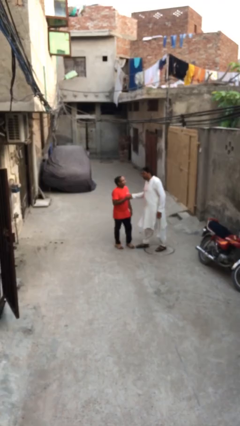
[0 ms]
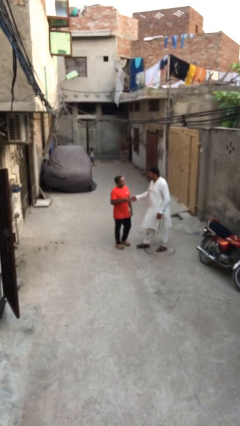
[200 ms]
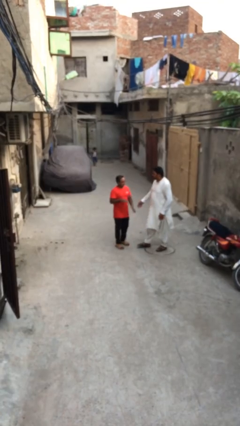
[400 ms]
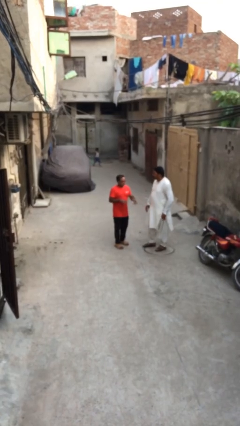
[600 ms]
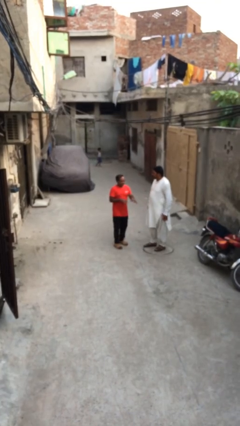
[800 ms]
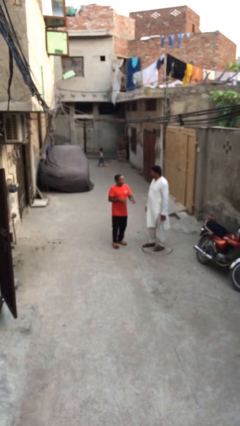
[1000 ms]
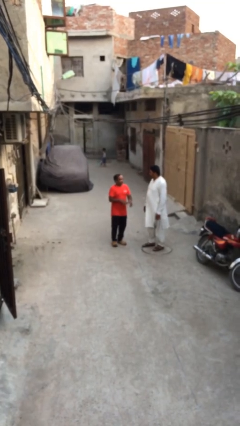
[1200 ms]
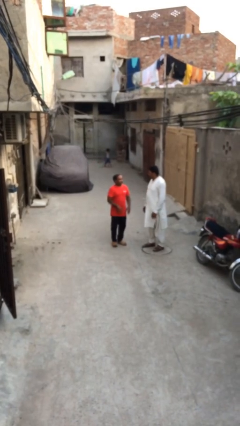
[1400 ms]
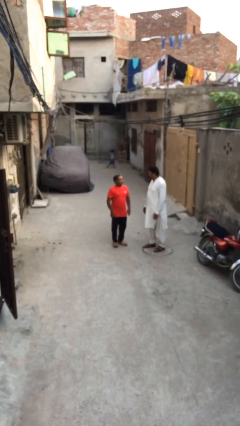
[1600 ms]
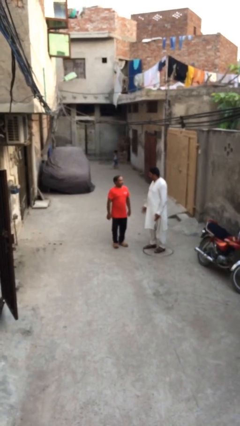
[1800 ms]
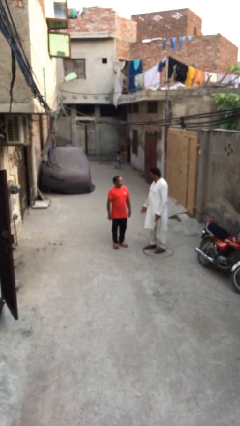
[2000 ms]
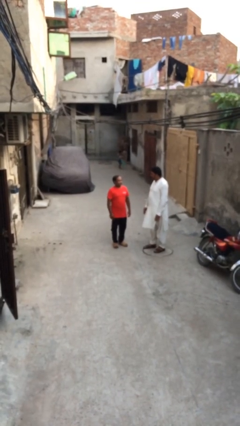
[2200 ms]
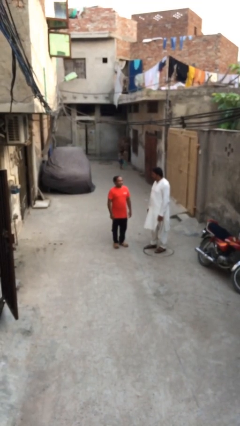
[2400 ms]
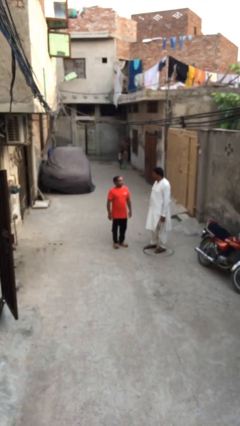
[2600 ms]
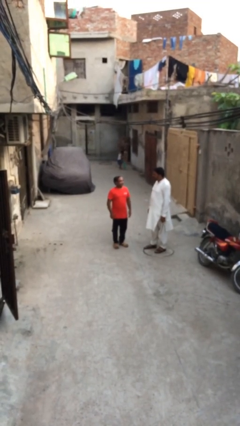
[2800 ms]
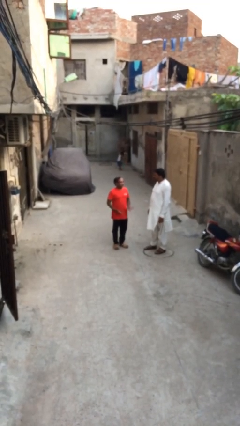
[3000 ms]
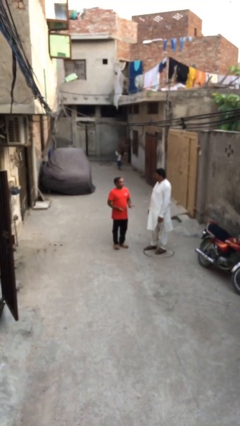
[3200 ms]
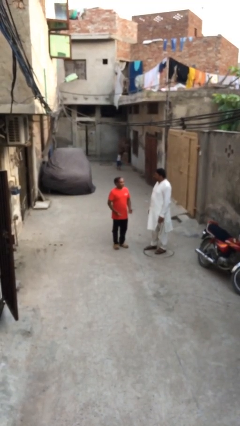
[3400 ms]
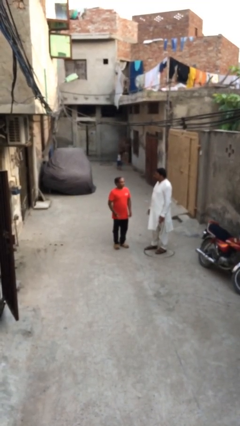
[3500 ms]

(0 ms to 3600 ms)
person talks to person

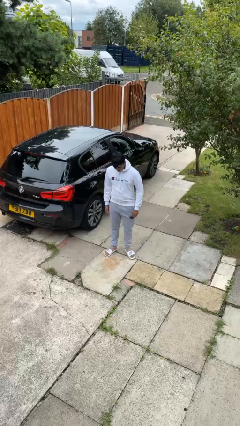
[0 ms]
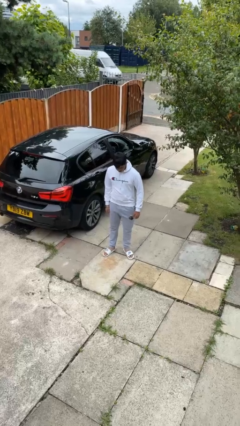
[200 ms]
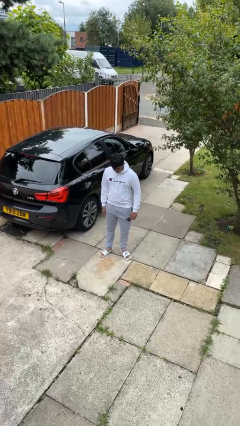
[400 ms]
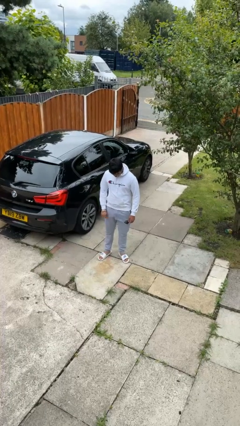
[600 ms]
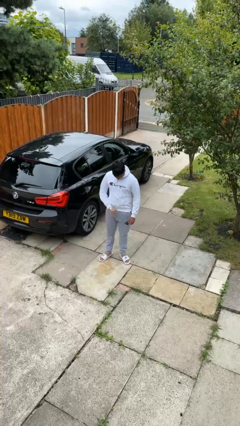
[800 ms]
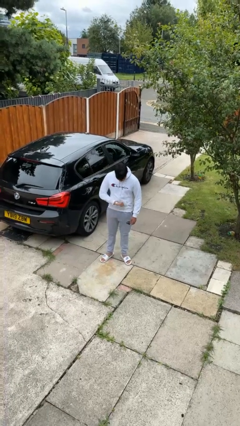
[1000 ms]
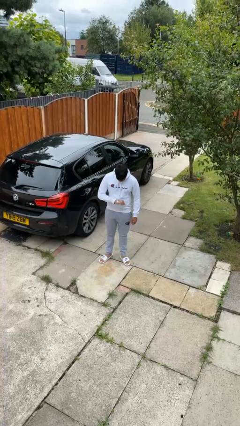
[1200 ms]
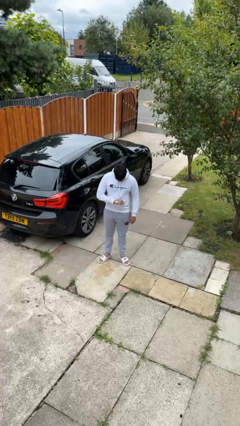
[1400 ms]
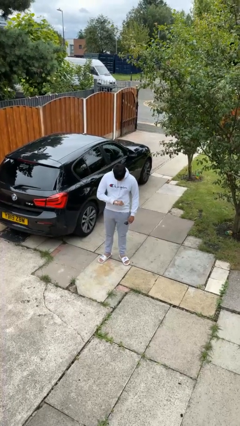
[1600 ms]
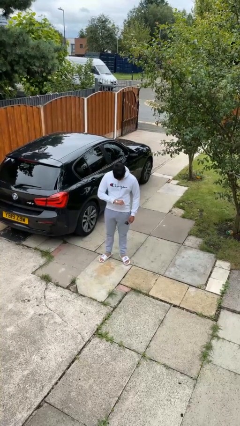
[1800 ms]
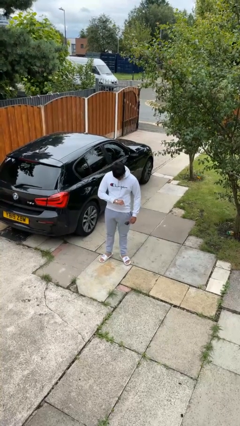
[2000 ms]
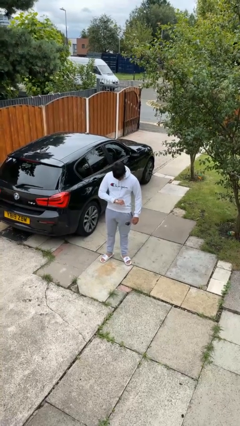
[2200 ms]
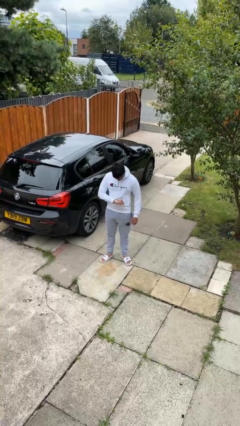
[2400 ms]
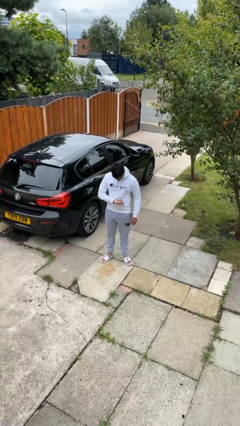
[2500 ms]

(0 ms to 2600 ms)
person looks at wristwatch

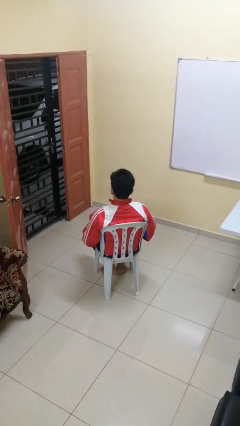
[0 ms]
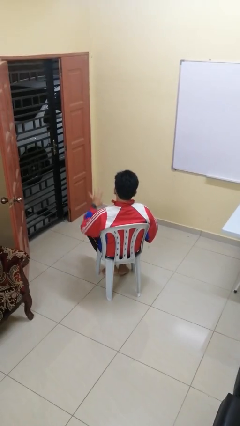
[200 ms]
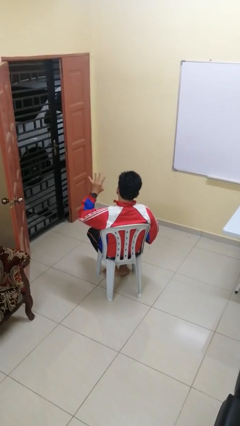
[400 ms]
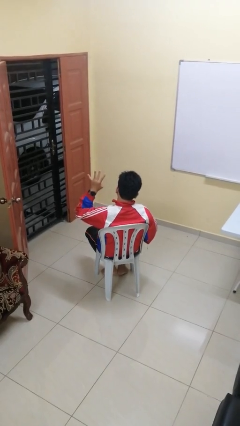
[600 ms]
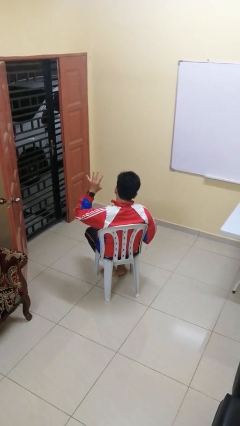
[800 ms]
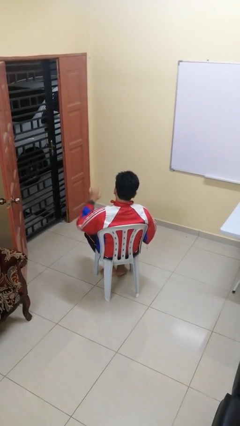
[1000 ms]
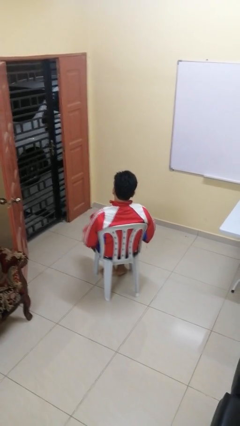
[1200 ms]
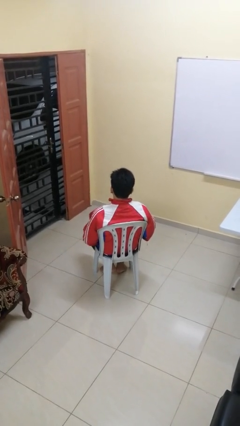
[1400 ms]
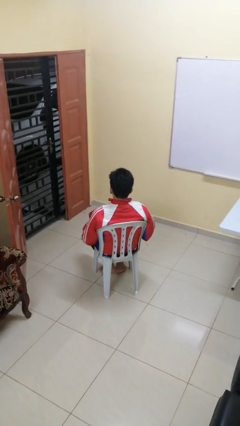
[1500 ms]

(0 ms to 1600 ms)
person gestures number four

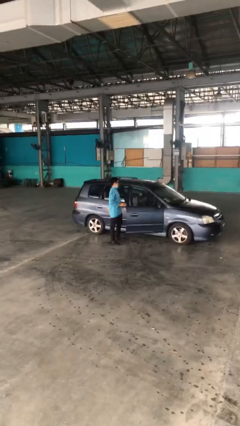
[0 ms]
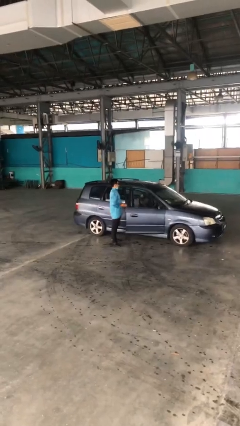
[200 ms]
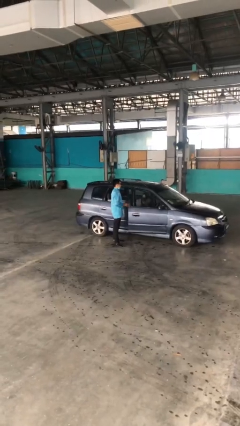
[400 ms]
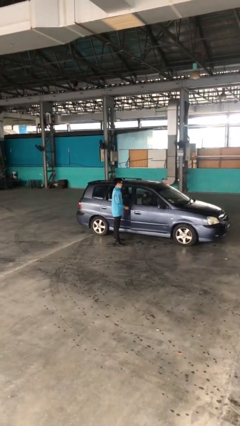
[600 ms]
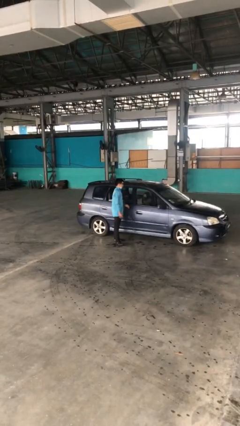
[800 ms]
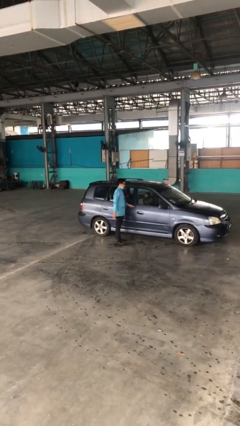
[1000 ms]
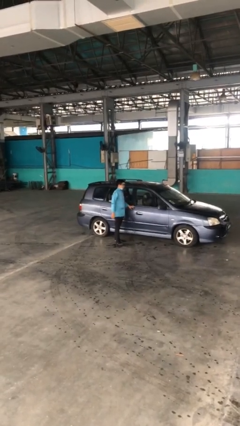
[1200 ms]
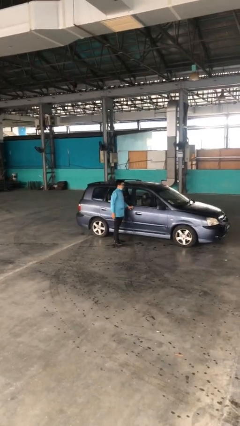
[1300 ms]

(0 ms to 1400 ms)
person closes car door

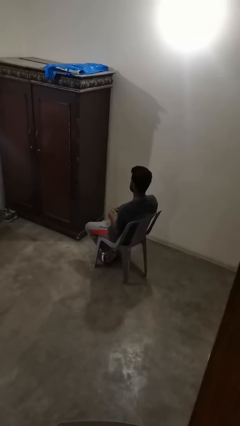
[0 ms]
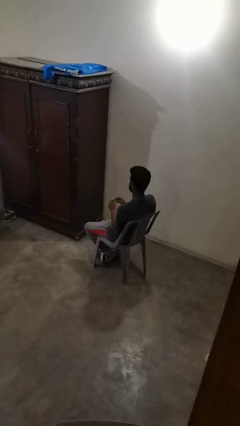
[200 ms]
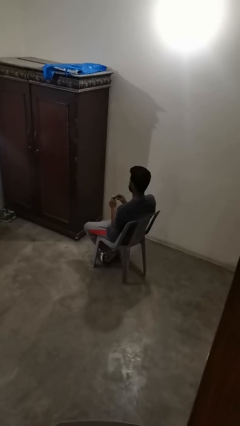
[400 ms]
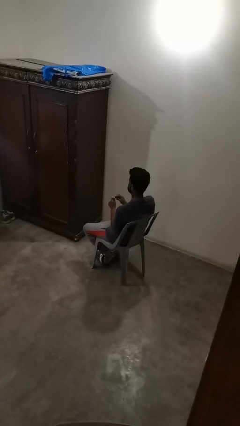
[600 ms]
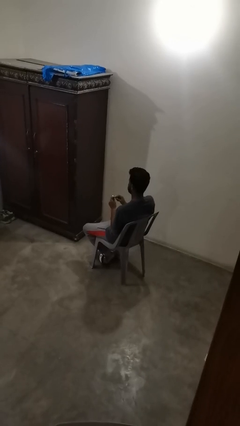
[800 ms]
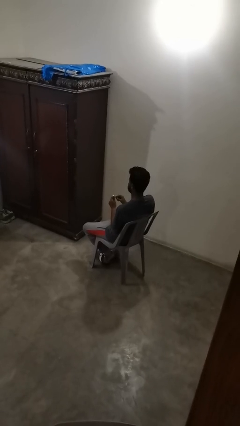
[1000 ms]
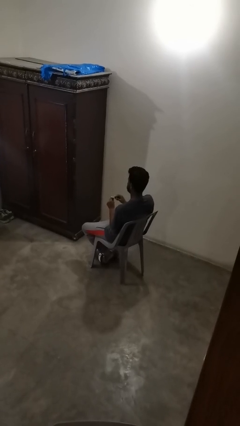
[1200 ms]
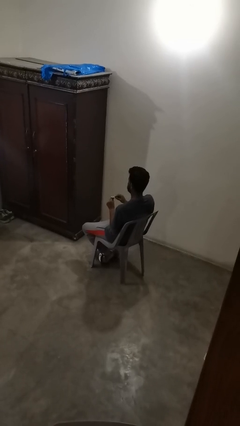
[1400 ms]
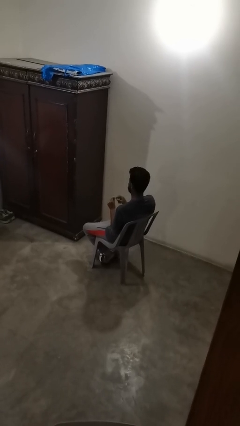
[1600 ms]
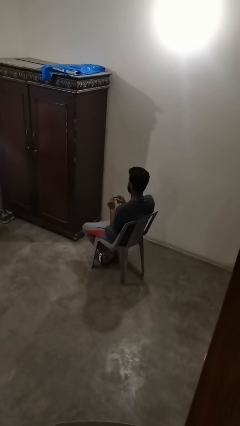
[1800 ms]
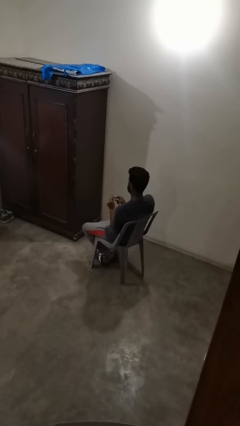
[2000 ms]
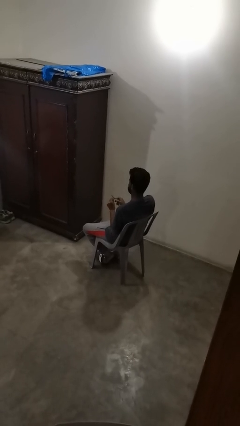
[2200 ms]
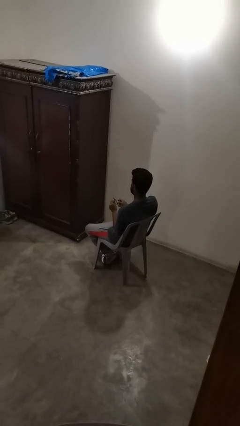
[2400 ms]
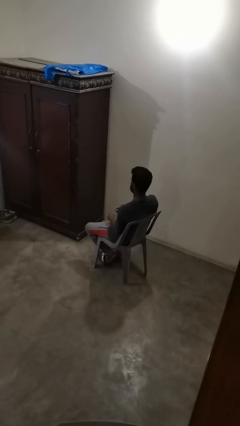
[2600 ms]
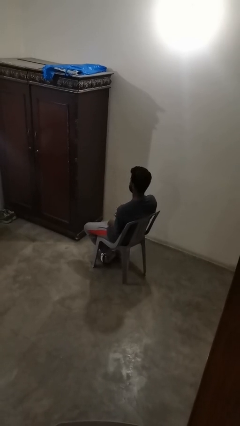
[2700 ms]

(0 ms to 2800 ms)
person files fingernails

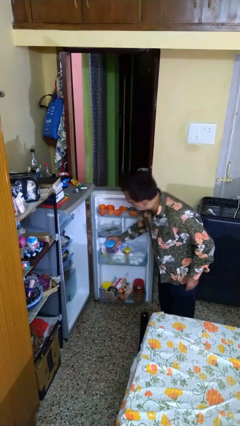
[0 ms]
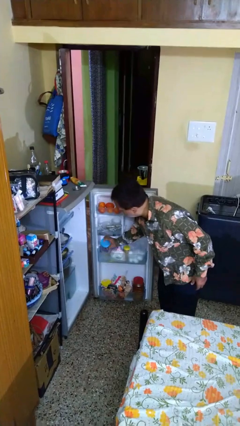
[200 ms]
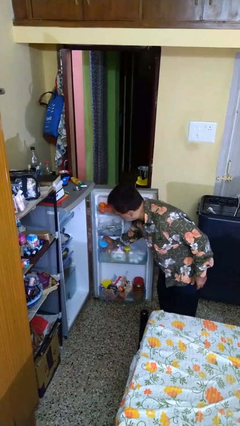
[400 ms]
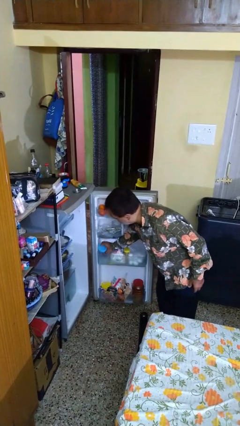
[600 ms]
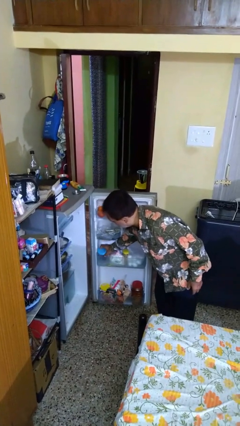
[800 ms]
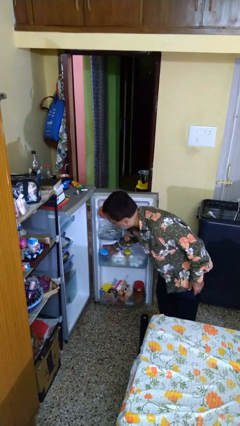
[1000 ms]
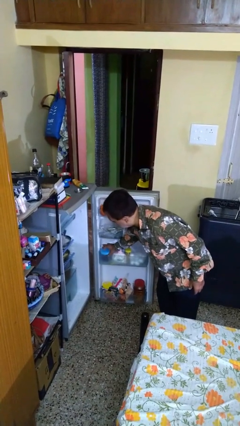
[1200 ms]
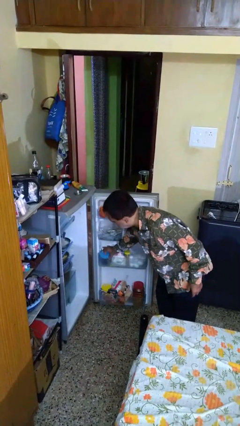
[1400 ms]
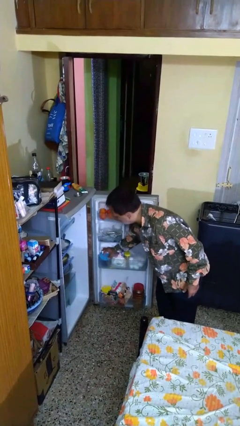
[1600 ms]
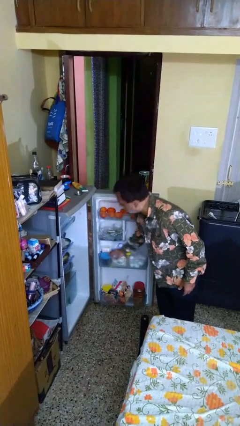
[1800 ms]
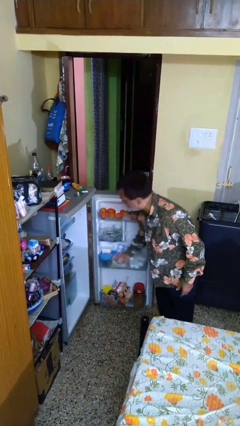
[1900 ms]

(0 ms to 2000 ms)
person puts object into refrigerator

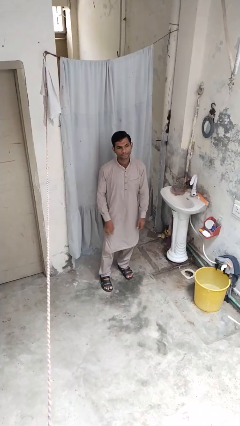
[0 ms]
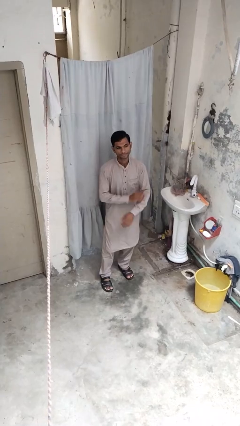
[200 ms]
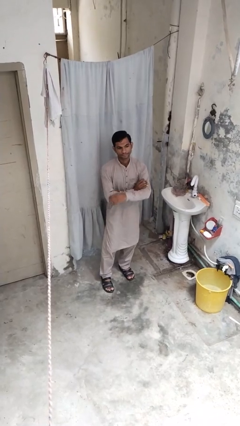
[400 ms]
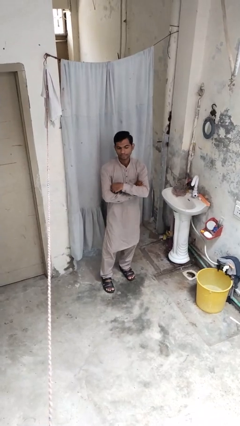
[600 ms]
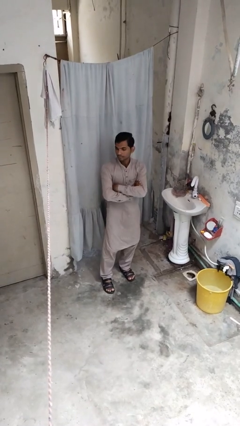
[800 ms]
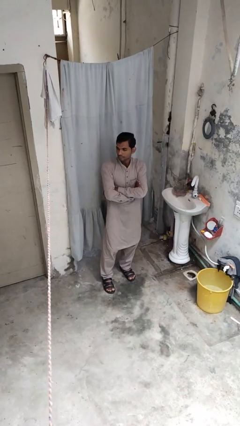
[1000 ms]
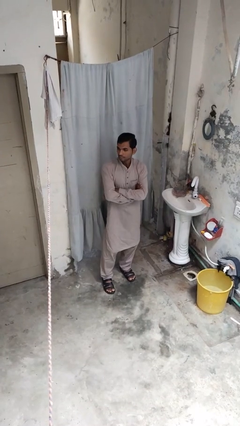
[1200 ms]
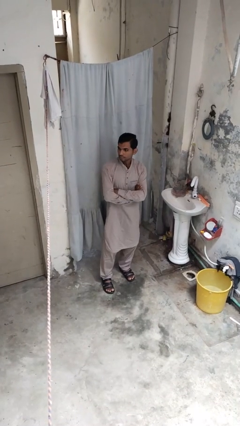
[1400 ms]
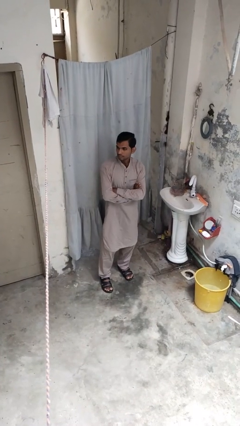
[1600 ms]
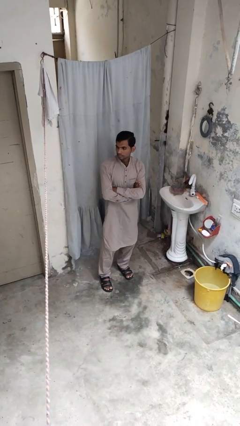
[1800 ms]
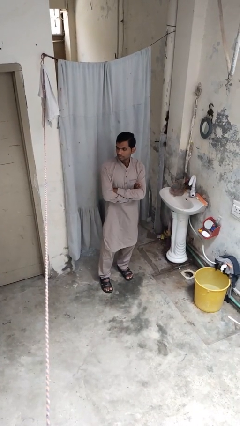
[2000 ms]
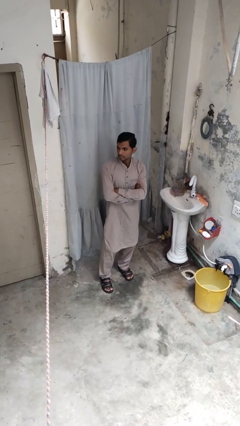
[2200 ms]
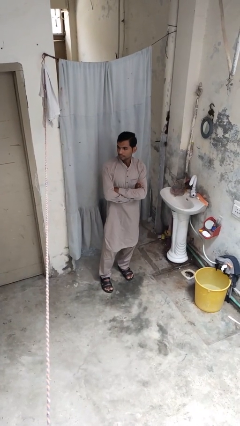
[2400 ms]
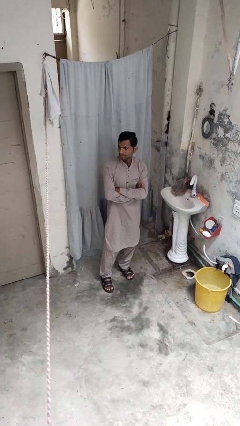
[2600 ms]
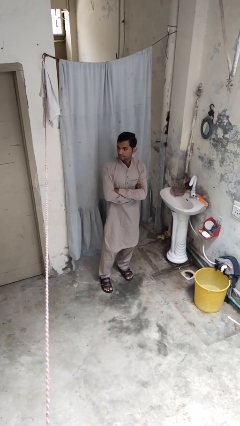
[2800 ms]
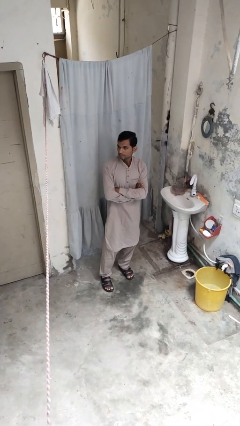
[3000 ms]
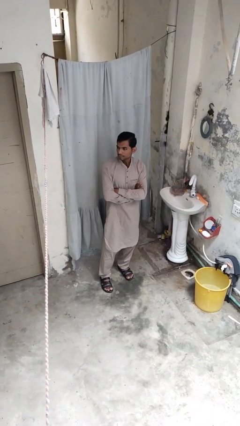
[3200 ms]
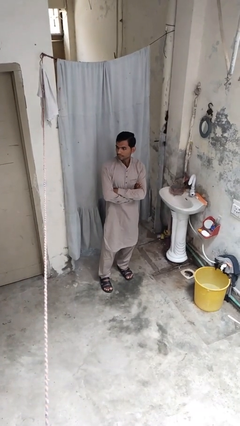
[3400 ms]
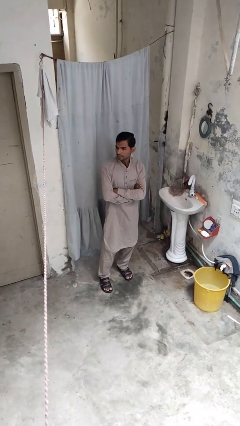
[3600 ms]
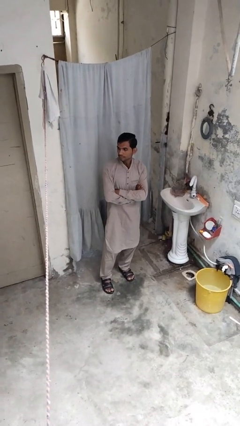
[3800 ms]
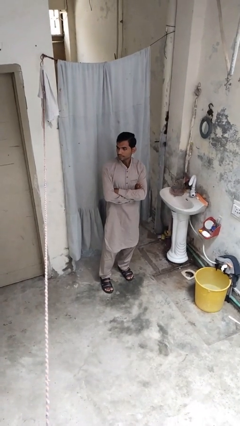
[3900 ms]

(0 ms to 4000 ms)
person crosses arms
